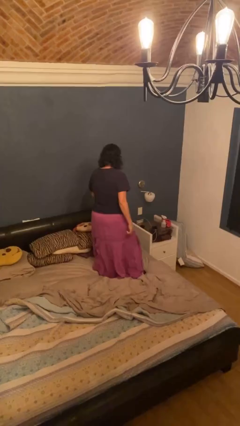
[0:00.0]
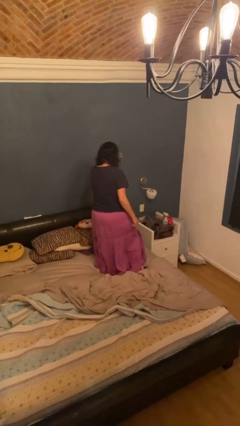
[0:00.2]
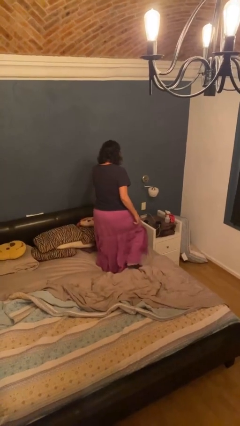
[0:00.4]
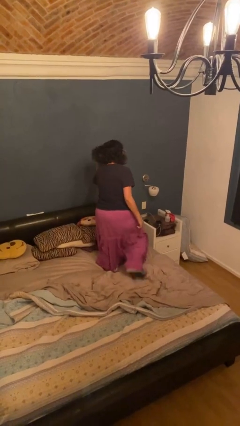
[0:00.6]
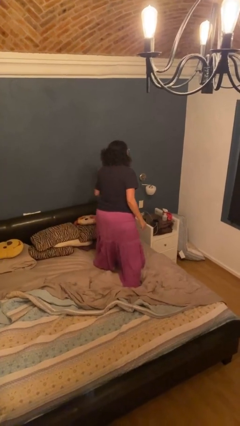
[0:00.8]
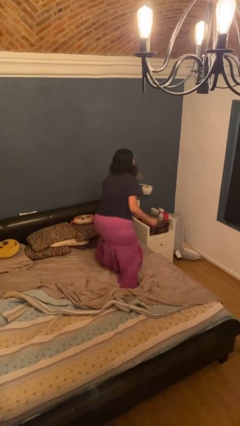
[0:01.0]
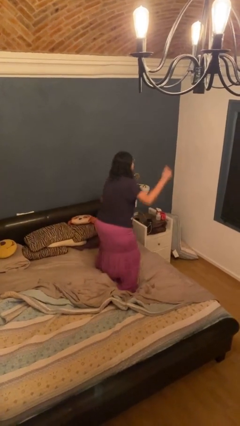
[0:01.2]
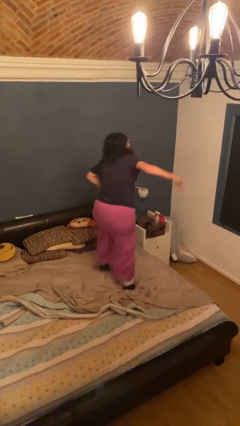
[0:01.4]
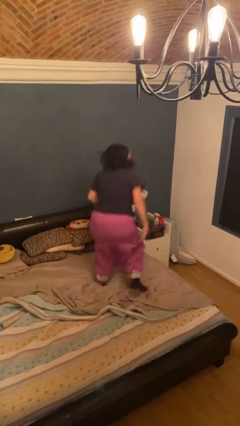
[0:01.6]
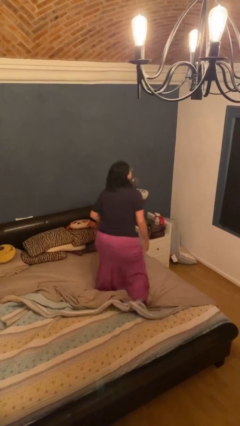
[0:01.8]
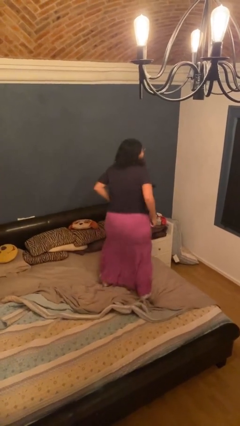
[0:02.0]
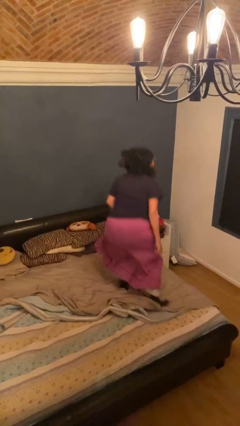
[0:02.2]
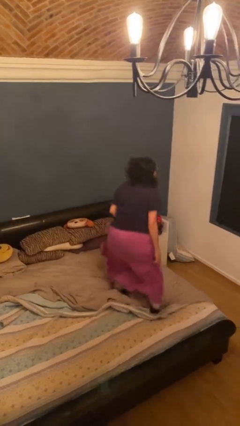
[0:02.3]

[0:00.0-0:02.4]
person jumps on bed

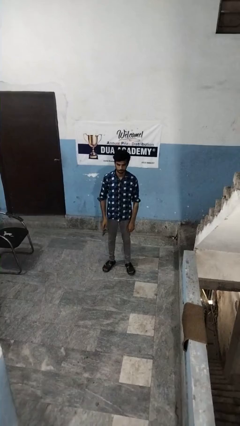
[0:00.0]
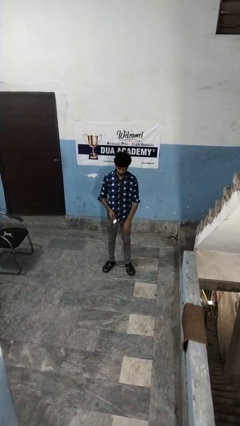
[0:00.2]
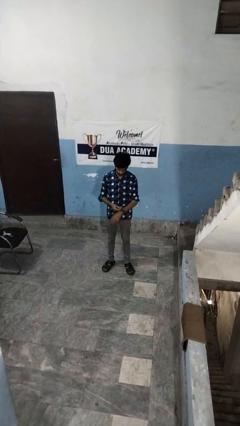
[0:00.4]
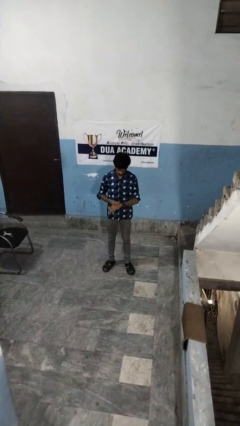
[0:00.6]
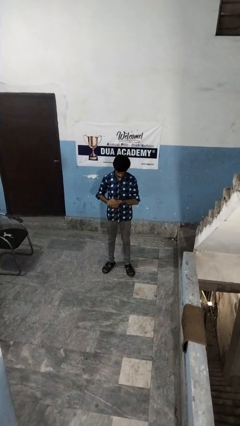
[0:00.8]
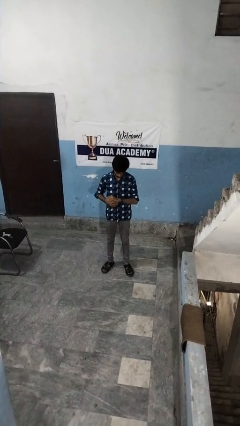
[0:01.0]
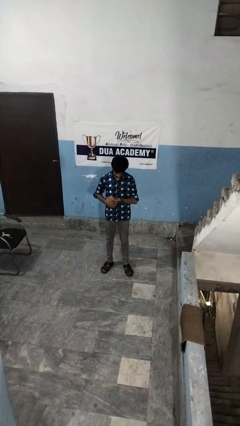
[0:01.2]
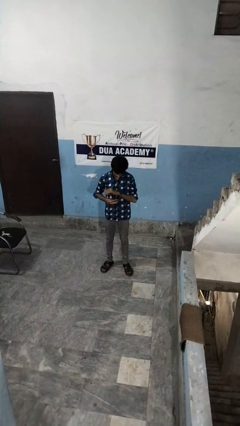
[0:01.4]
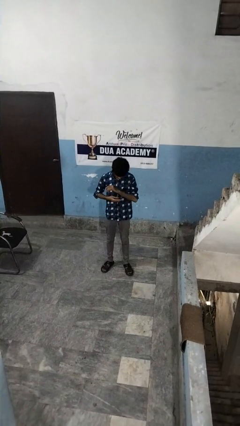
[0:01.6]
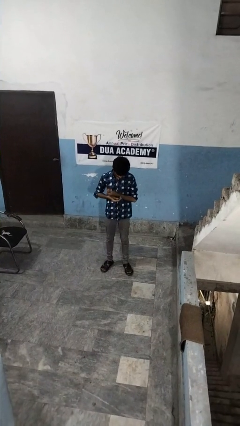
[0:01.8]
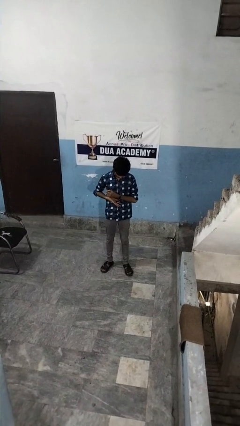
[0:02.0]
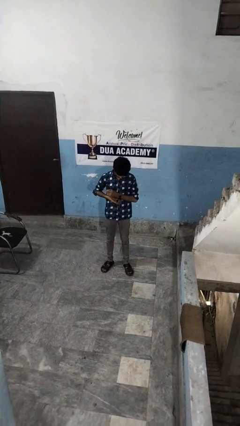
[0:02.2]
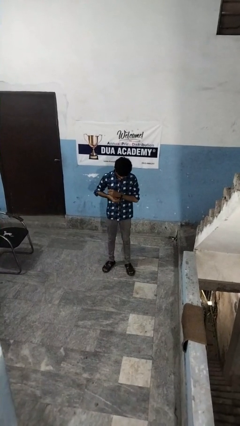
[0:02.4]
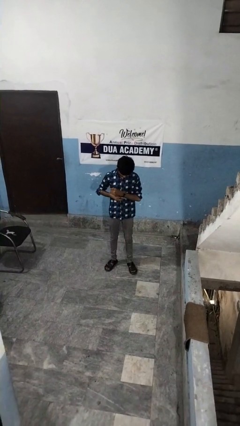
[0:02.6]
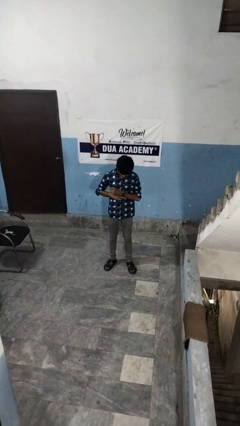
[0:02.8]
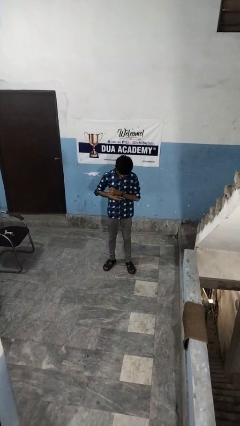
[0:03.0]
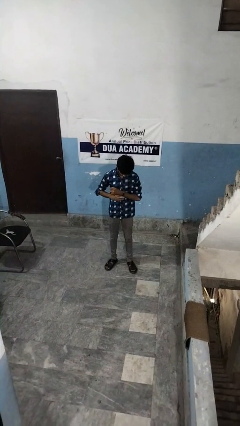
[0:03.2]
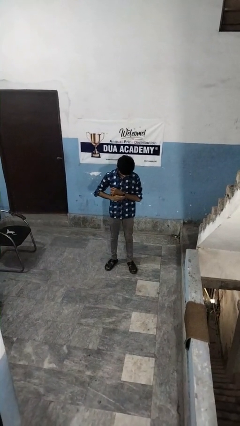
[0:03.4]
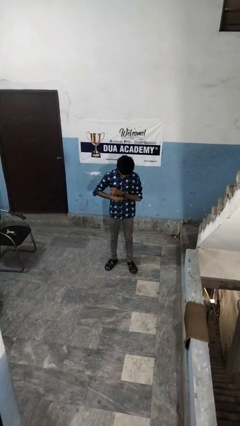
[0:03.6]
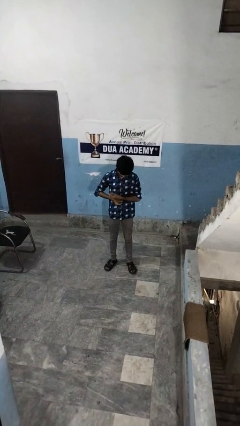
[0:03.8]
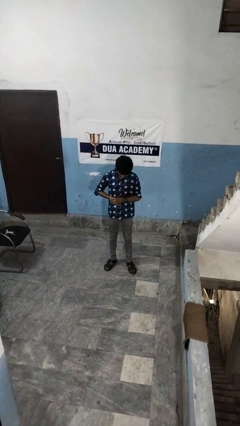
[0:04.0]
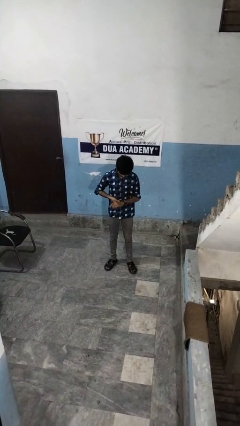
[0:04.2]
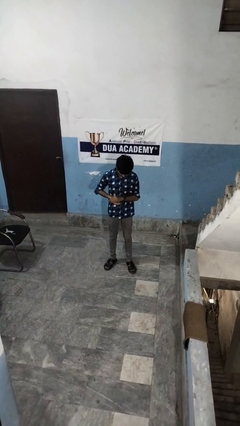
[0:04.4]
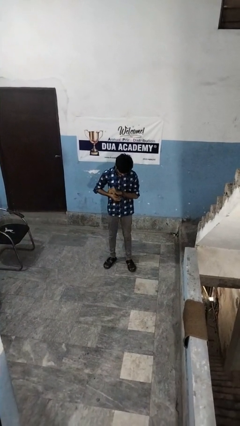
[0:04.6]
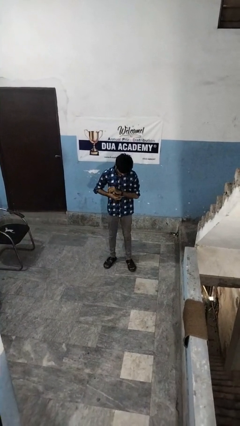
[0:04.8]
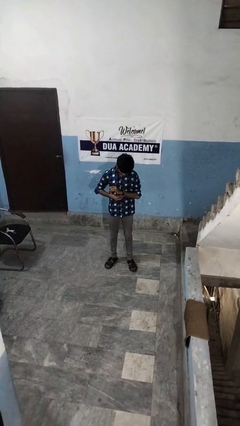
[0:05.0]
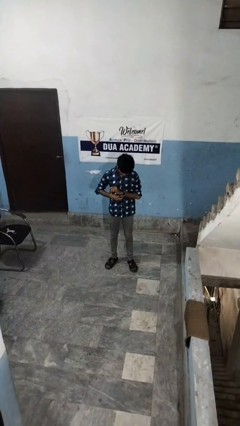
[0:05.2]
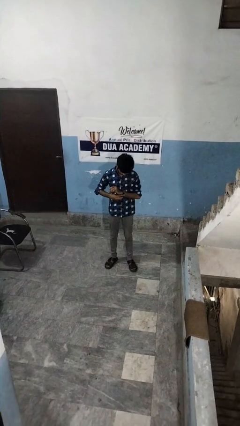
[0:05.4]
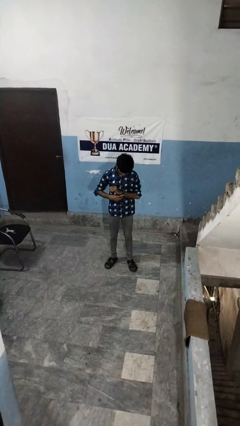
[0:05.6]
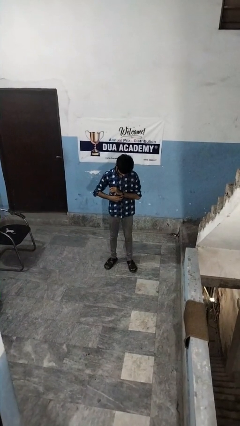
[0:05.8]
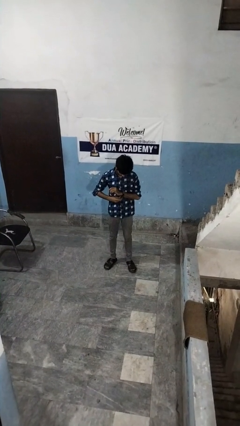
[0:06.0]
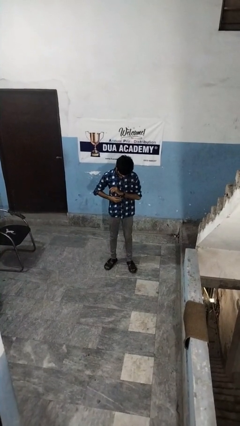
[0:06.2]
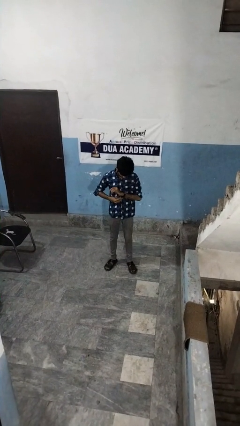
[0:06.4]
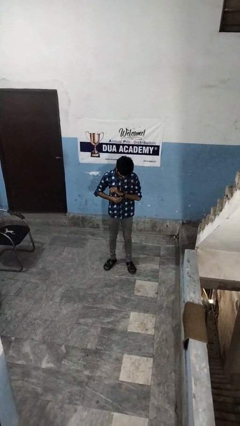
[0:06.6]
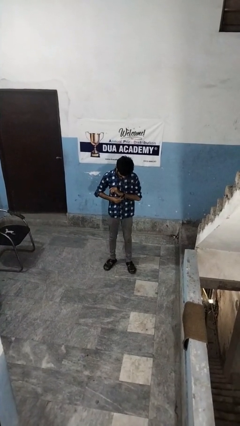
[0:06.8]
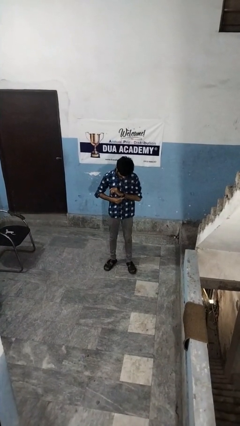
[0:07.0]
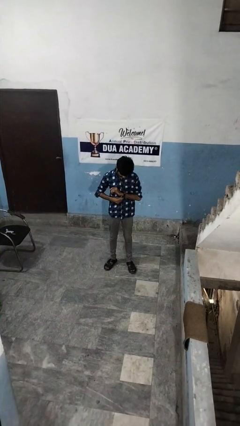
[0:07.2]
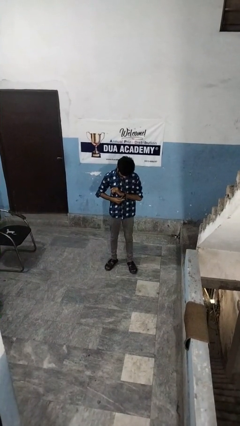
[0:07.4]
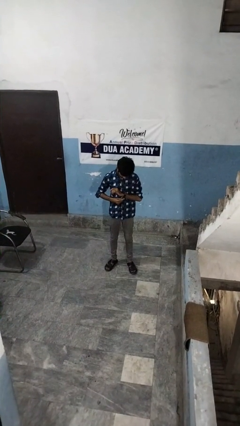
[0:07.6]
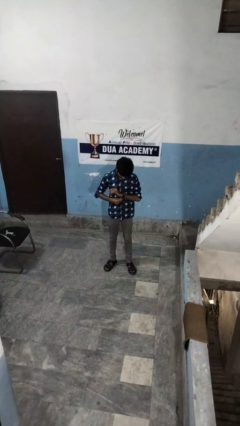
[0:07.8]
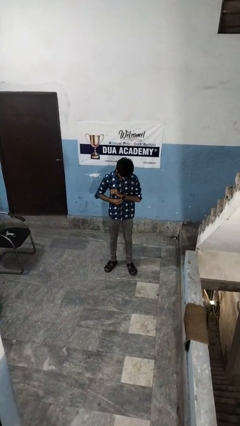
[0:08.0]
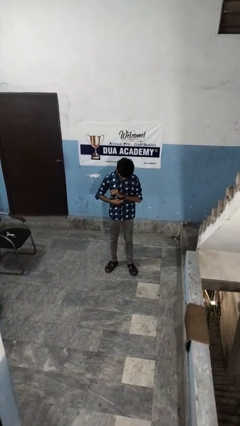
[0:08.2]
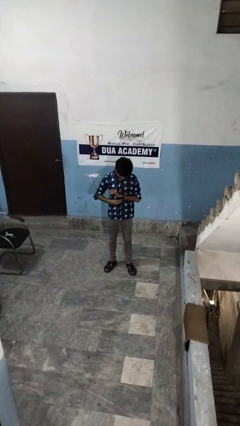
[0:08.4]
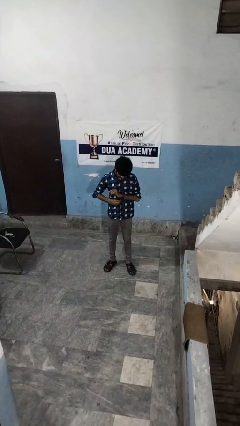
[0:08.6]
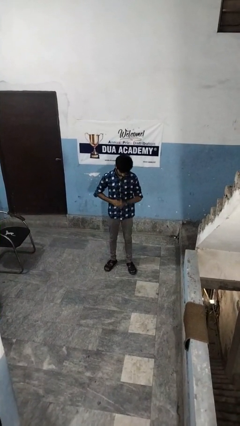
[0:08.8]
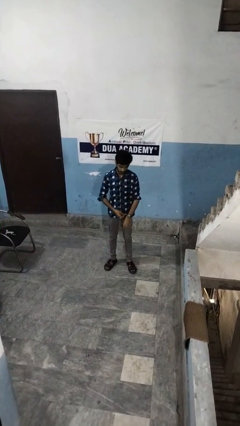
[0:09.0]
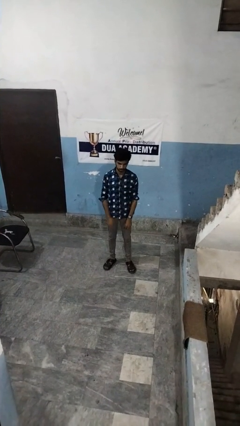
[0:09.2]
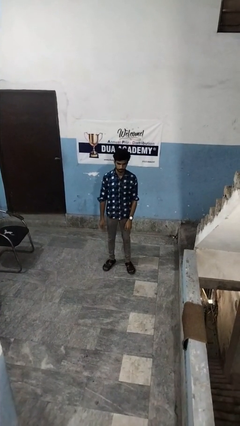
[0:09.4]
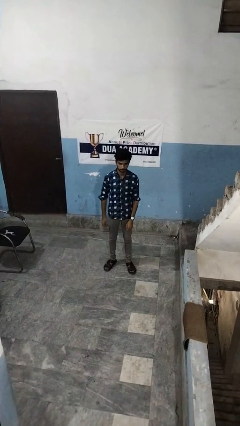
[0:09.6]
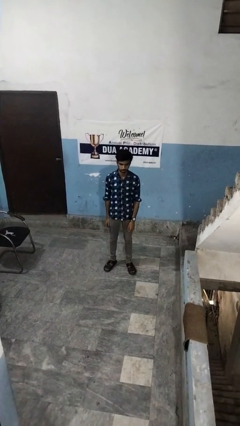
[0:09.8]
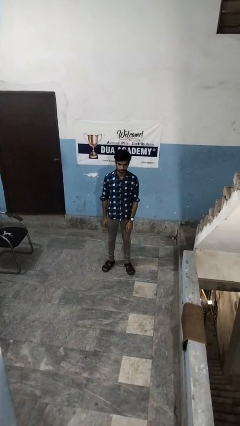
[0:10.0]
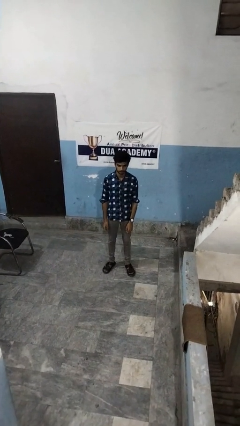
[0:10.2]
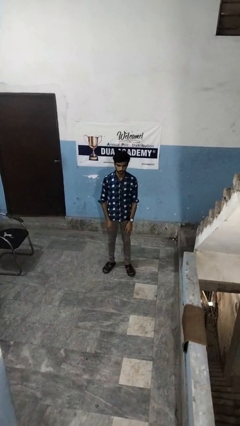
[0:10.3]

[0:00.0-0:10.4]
person puts on wristwatch

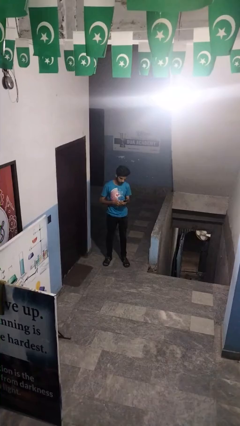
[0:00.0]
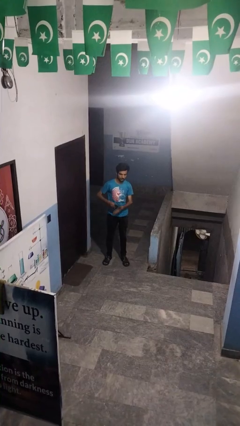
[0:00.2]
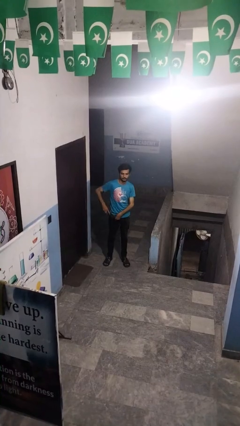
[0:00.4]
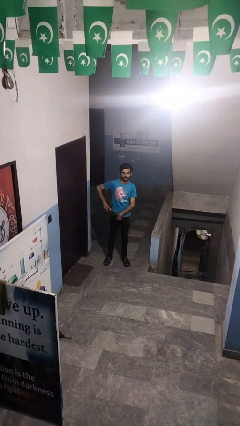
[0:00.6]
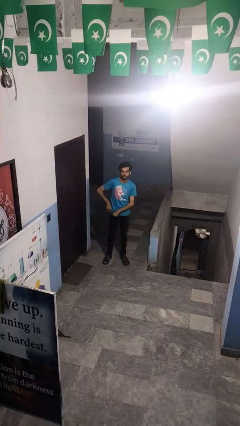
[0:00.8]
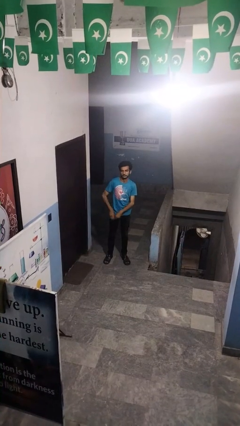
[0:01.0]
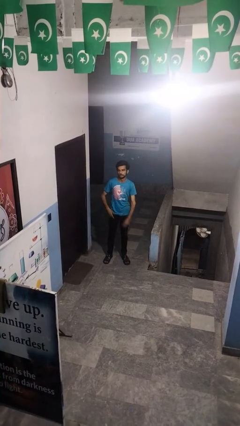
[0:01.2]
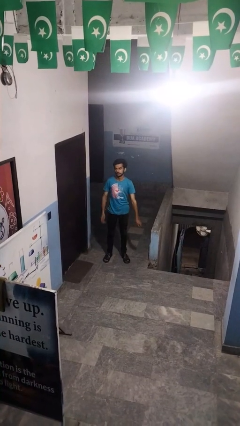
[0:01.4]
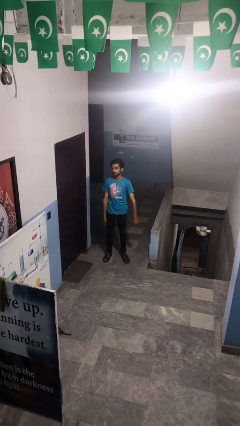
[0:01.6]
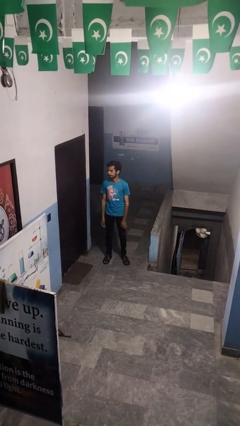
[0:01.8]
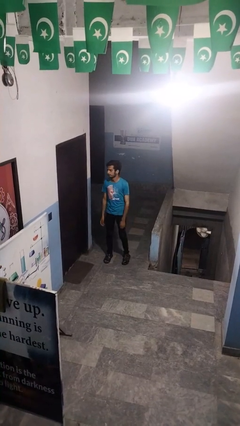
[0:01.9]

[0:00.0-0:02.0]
person puts phone into pocket

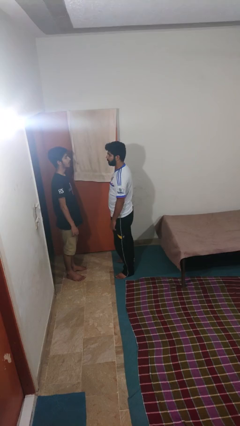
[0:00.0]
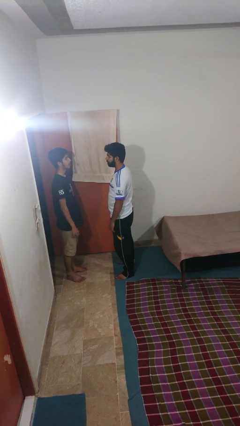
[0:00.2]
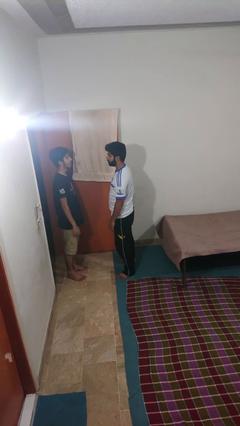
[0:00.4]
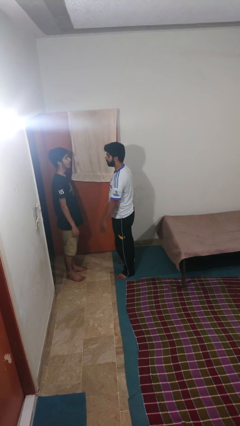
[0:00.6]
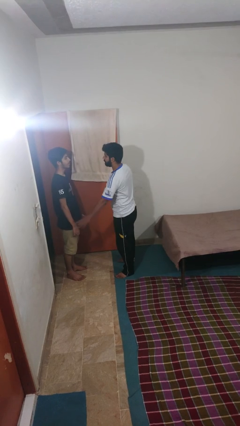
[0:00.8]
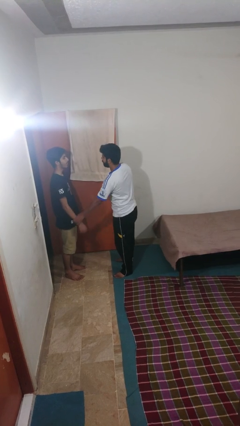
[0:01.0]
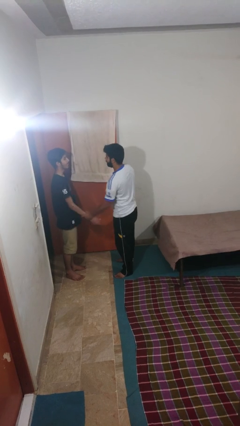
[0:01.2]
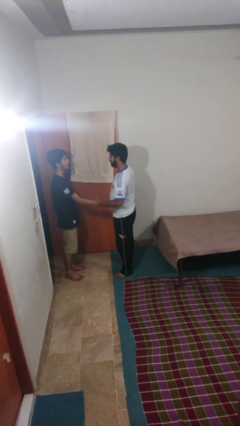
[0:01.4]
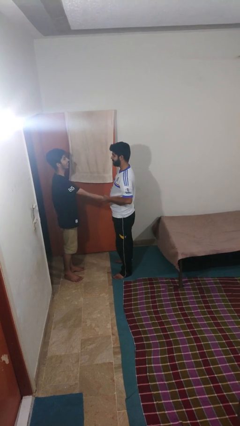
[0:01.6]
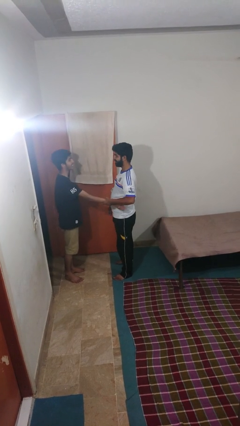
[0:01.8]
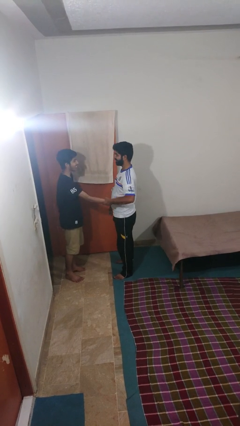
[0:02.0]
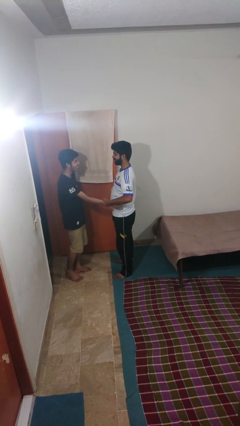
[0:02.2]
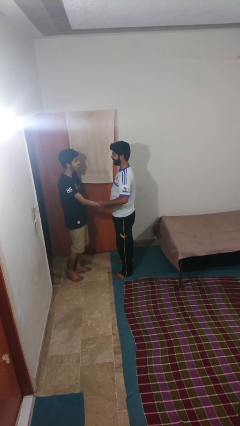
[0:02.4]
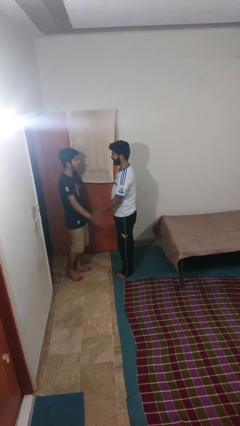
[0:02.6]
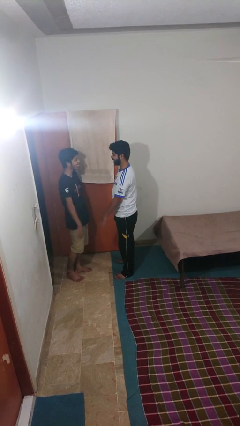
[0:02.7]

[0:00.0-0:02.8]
person grabs person by forearm
